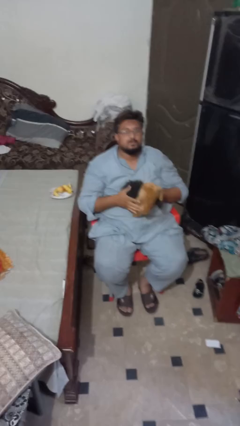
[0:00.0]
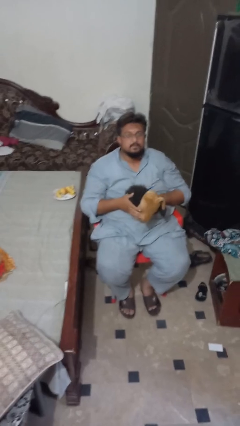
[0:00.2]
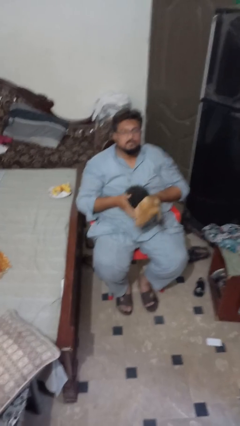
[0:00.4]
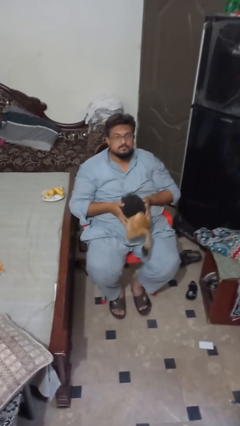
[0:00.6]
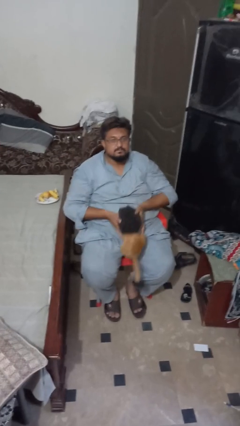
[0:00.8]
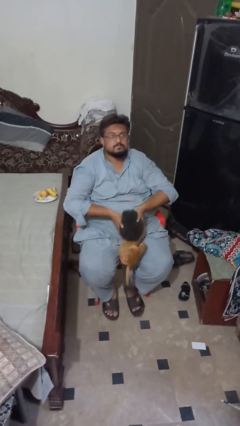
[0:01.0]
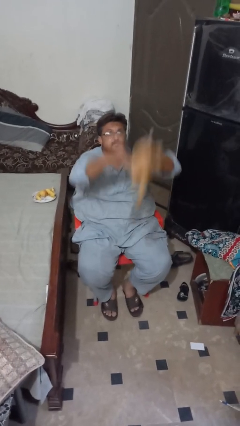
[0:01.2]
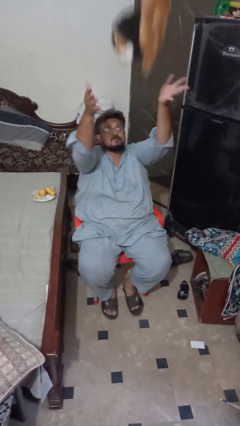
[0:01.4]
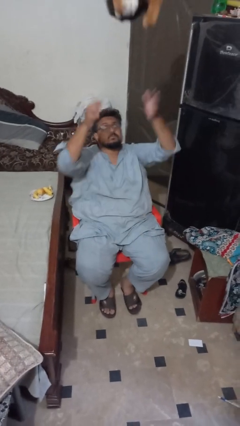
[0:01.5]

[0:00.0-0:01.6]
person drops object

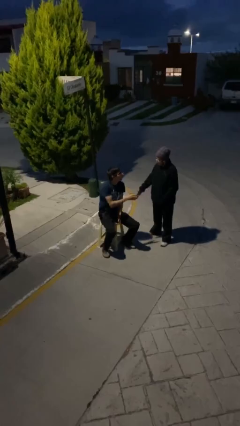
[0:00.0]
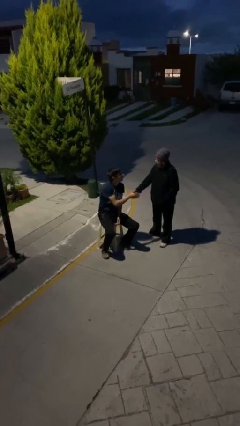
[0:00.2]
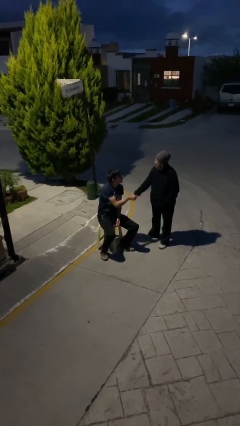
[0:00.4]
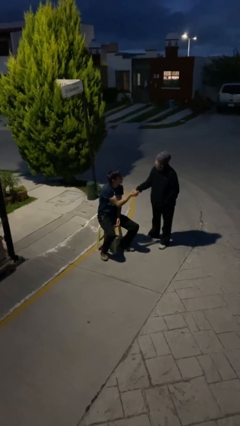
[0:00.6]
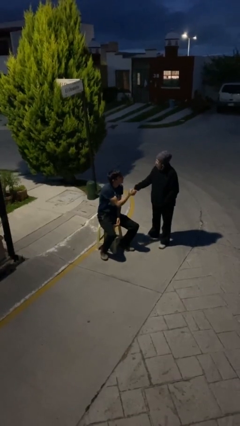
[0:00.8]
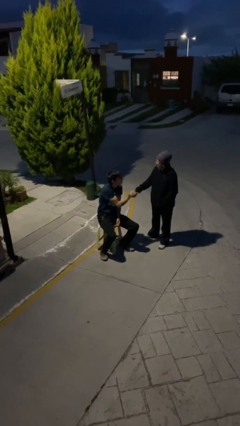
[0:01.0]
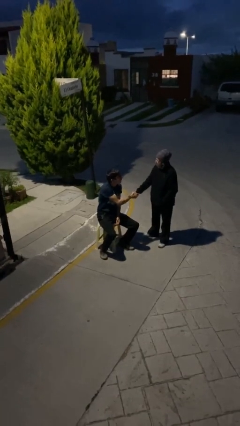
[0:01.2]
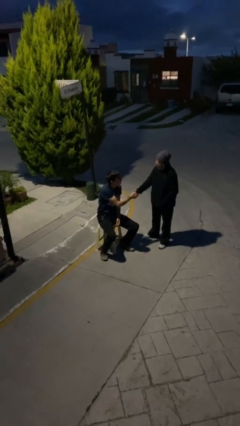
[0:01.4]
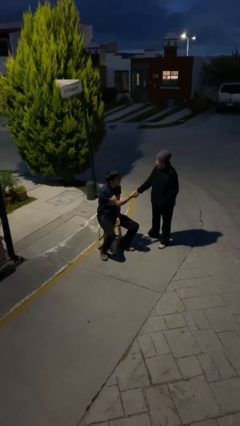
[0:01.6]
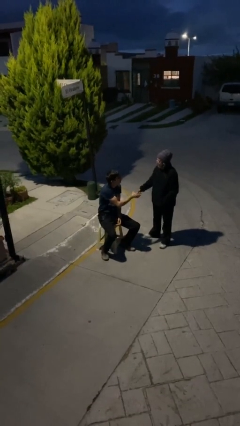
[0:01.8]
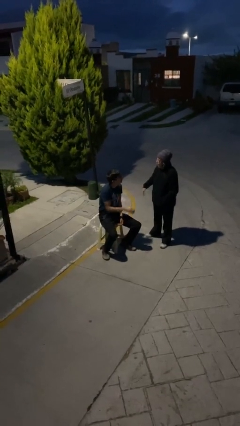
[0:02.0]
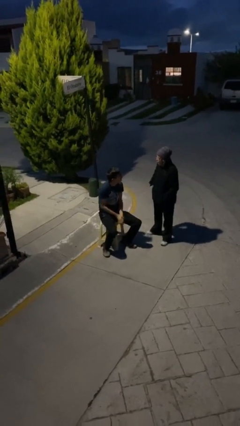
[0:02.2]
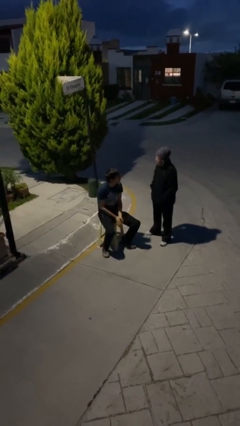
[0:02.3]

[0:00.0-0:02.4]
person shakes hand

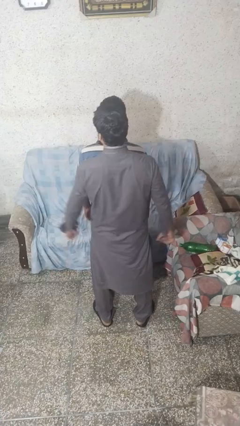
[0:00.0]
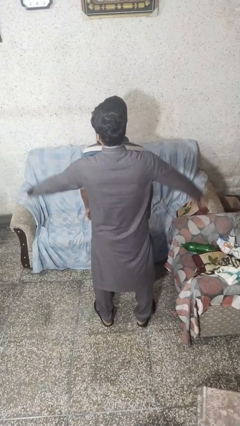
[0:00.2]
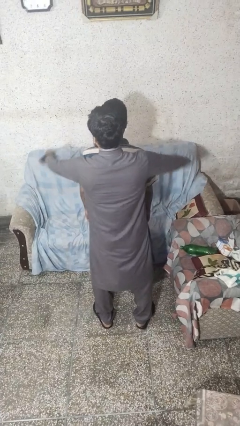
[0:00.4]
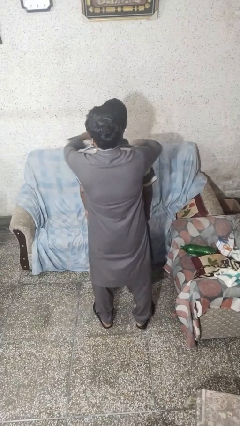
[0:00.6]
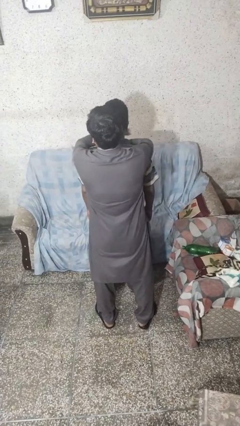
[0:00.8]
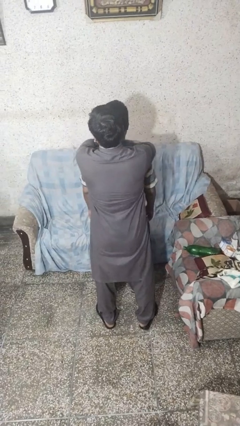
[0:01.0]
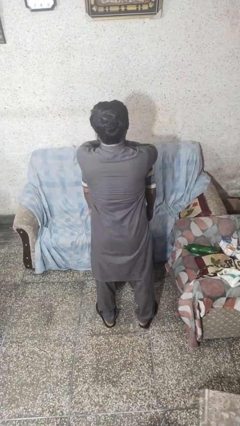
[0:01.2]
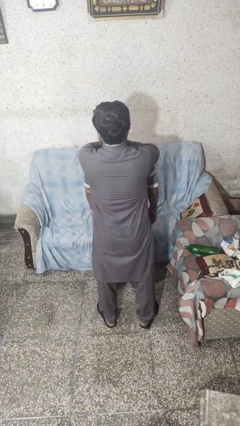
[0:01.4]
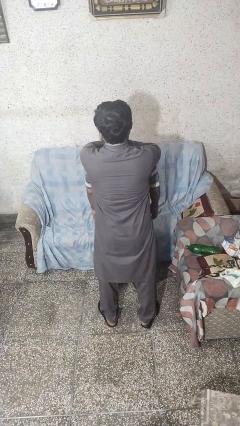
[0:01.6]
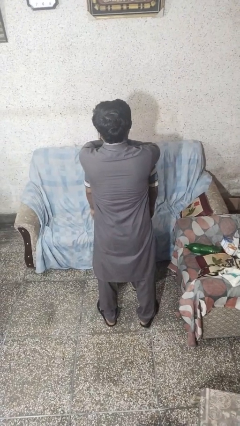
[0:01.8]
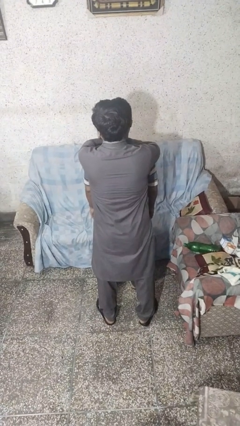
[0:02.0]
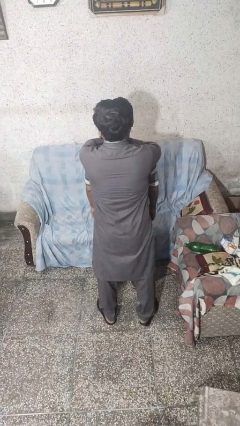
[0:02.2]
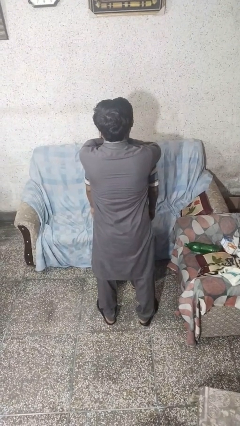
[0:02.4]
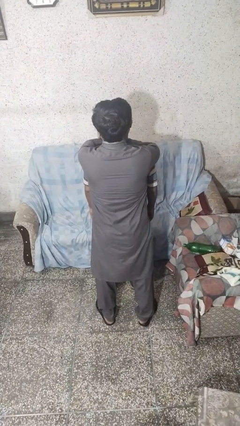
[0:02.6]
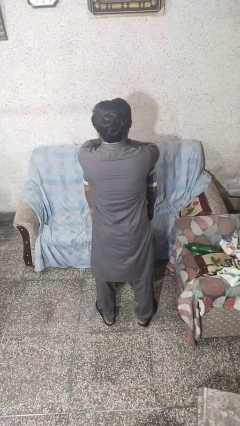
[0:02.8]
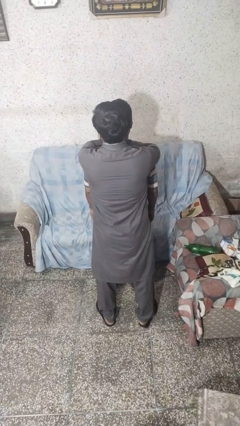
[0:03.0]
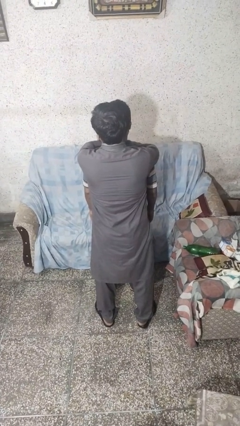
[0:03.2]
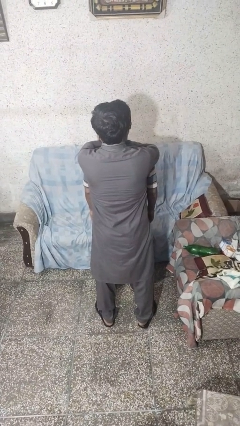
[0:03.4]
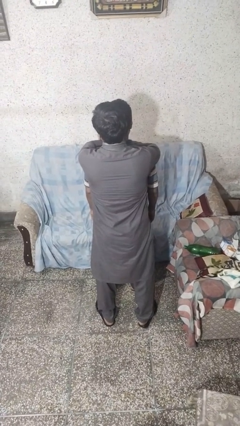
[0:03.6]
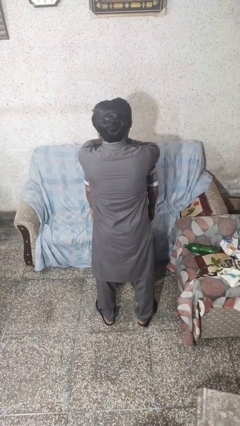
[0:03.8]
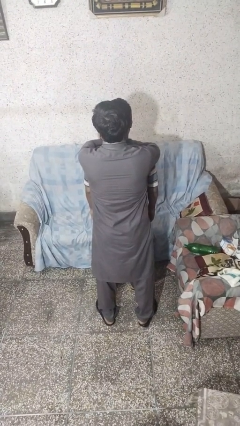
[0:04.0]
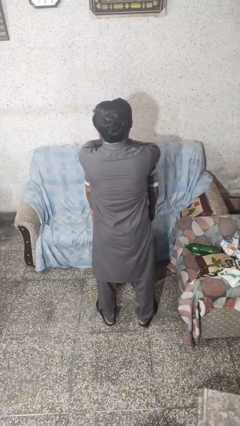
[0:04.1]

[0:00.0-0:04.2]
person hugs person from behind

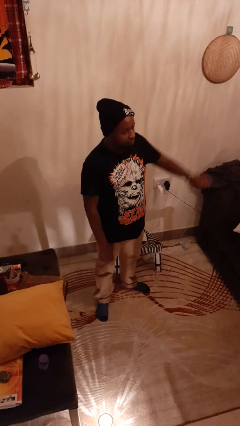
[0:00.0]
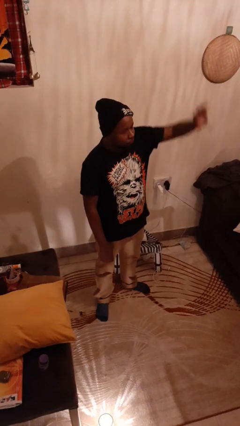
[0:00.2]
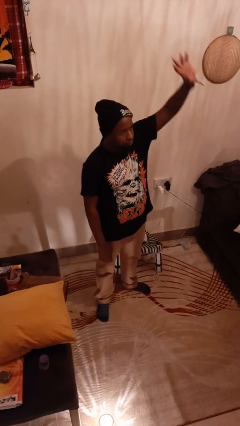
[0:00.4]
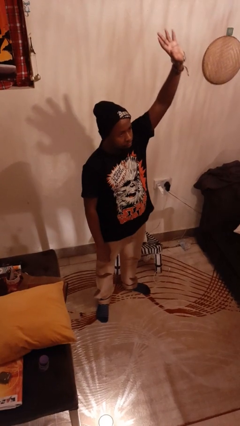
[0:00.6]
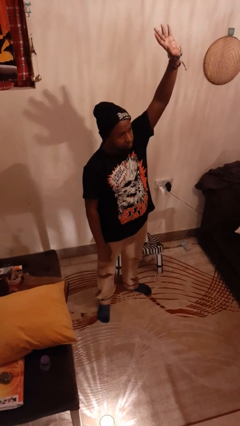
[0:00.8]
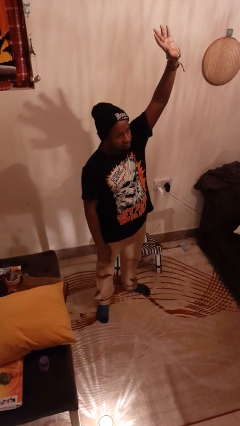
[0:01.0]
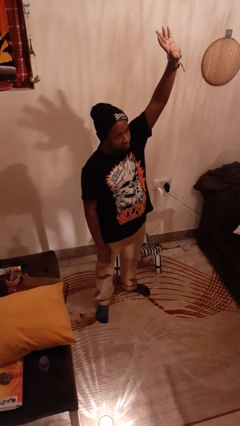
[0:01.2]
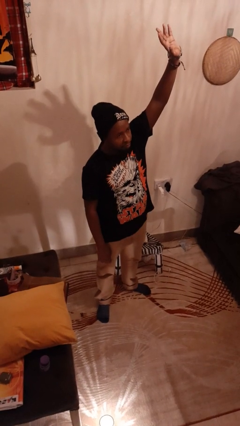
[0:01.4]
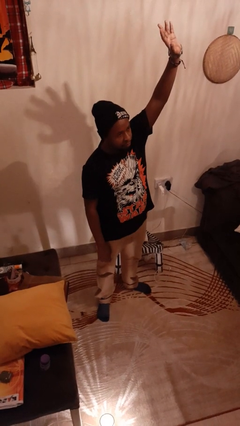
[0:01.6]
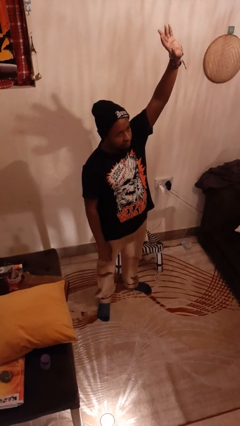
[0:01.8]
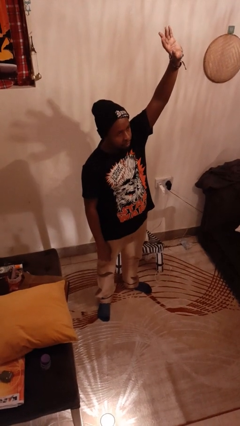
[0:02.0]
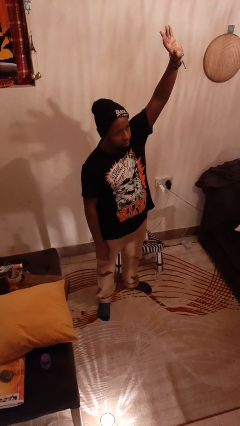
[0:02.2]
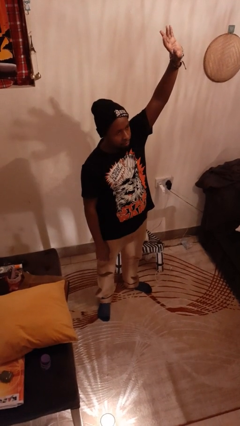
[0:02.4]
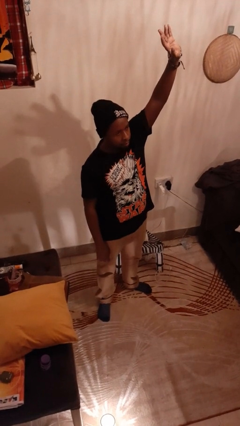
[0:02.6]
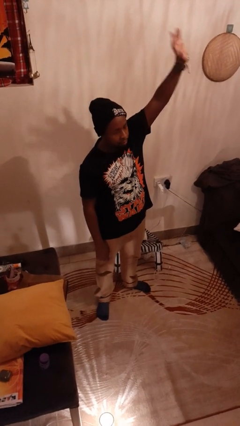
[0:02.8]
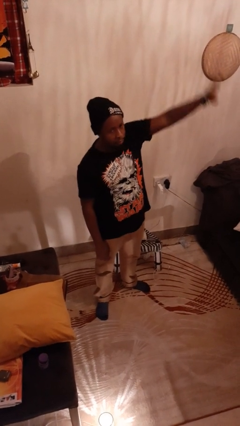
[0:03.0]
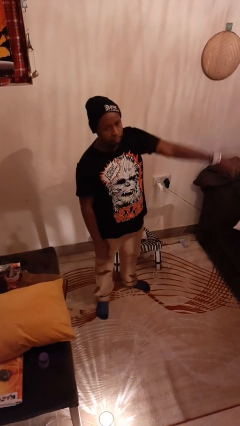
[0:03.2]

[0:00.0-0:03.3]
person gestures raise hand

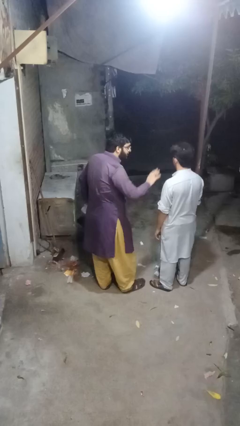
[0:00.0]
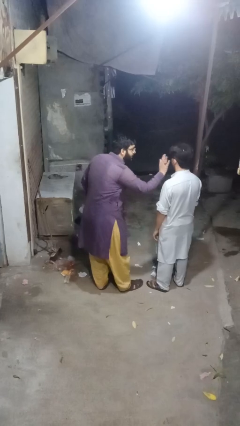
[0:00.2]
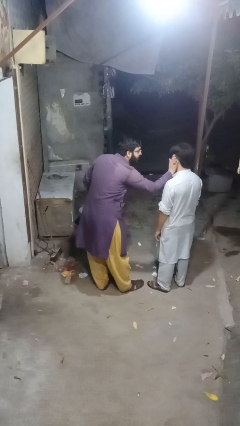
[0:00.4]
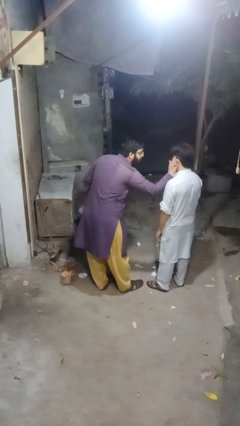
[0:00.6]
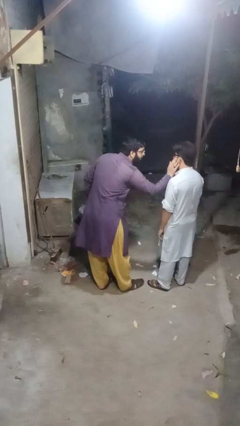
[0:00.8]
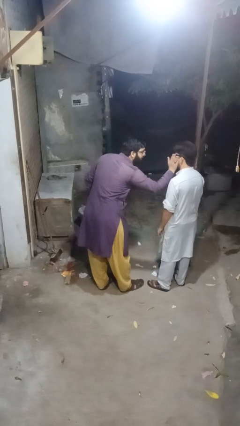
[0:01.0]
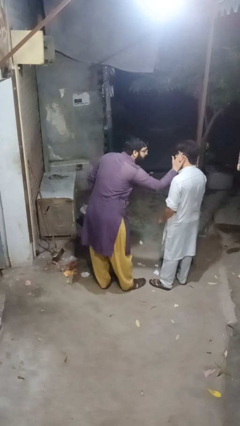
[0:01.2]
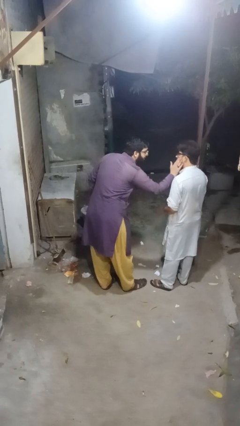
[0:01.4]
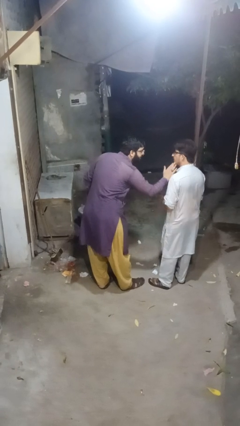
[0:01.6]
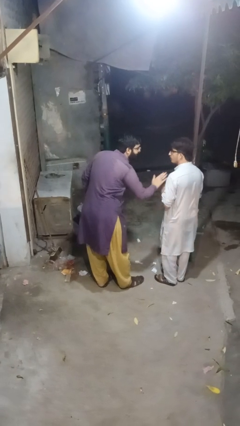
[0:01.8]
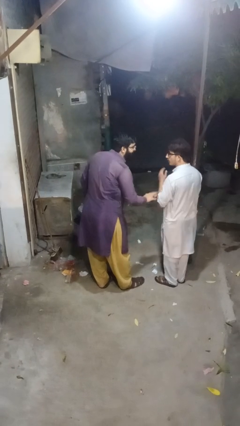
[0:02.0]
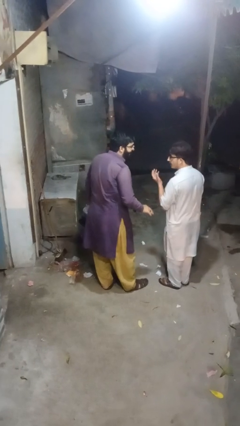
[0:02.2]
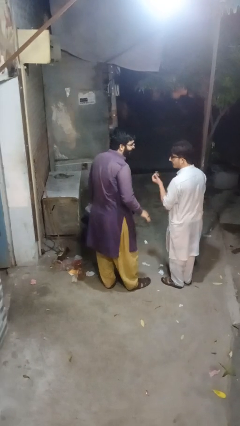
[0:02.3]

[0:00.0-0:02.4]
person touches face of person

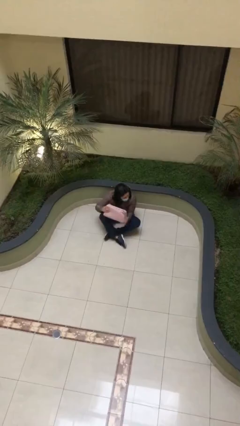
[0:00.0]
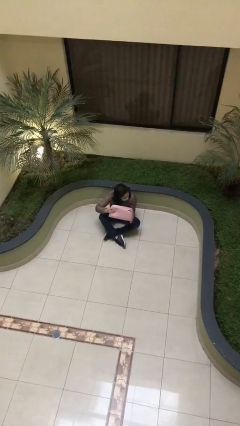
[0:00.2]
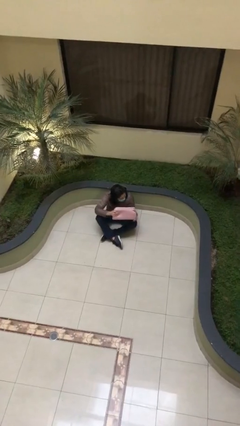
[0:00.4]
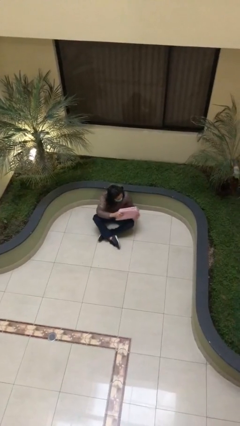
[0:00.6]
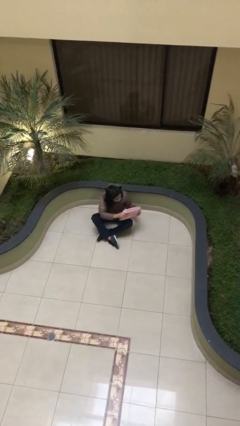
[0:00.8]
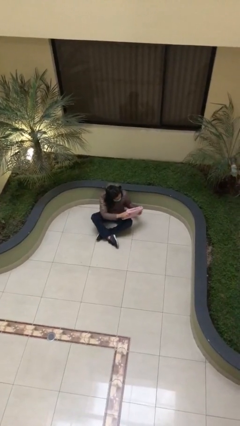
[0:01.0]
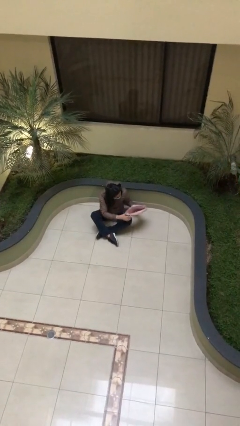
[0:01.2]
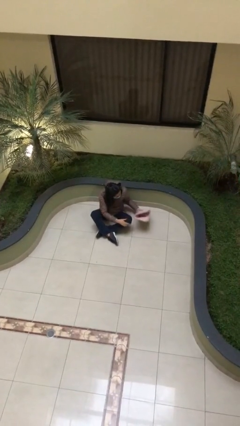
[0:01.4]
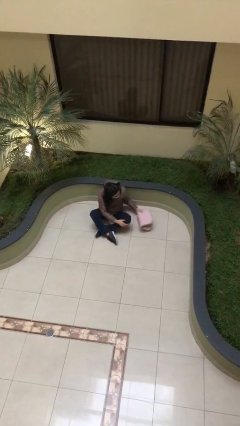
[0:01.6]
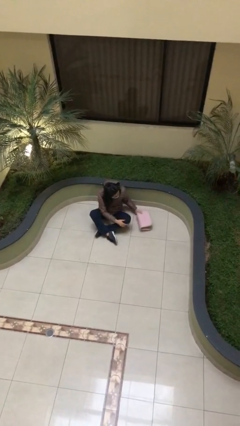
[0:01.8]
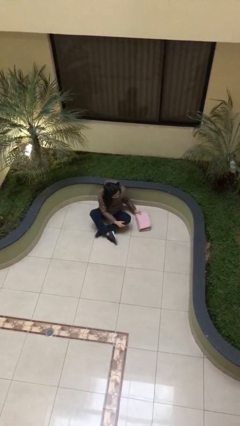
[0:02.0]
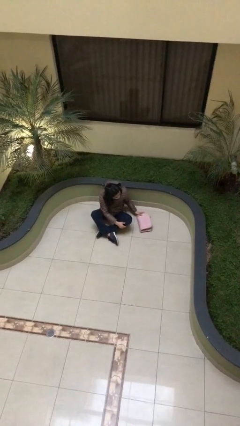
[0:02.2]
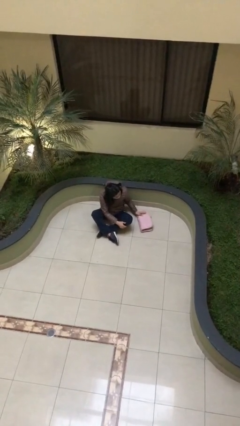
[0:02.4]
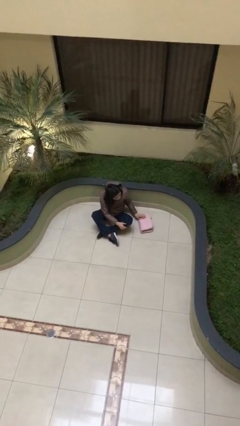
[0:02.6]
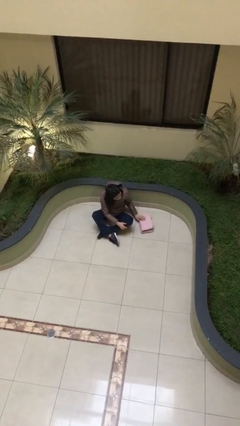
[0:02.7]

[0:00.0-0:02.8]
person puts down object on floor
